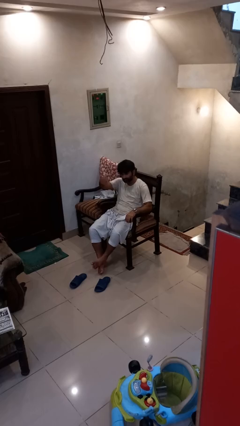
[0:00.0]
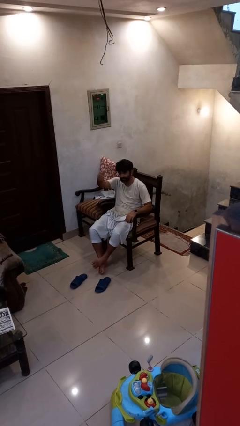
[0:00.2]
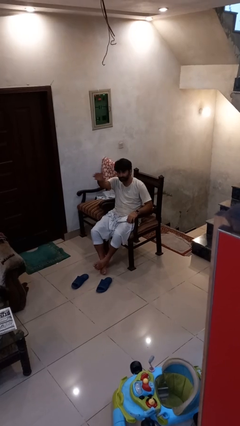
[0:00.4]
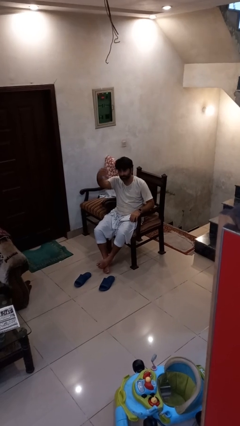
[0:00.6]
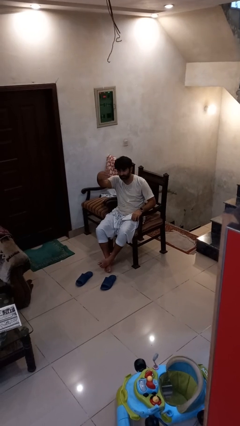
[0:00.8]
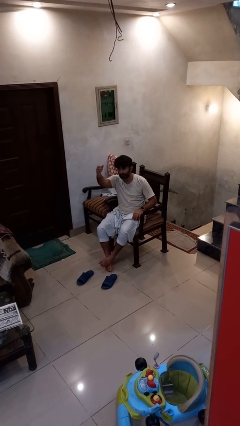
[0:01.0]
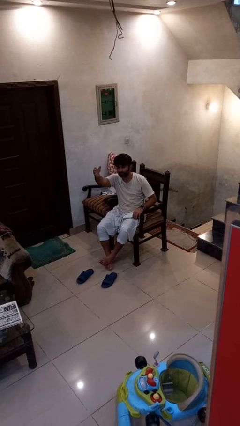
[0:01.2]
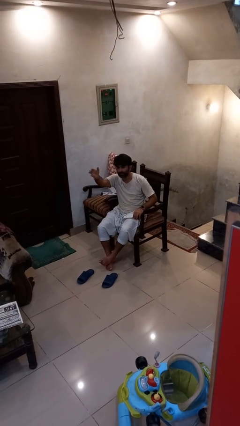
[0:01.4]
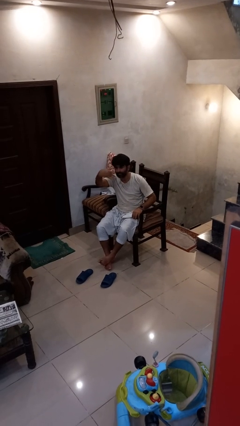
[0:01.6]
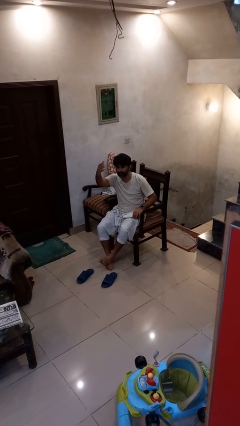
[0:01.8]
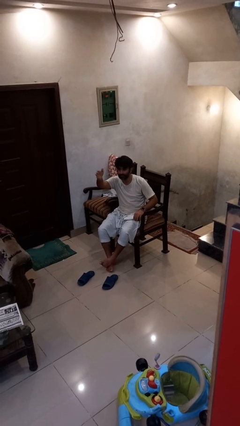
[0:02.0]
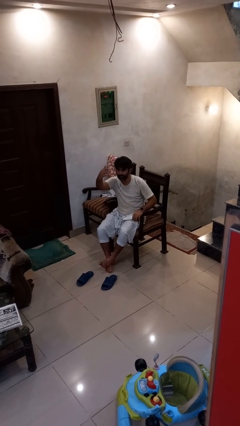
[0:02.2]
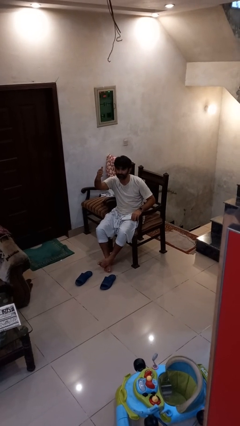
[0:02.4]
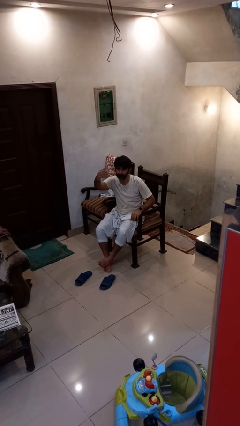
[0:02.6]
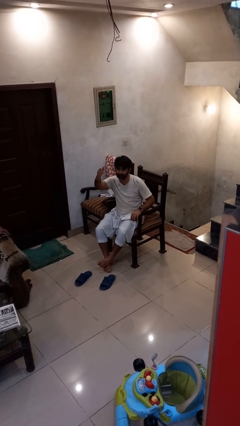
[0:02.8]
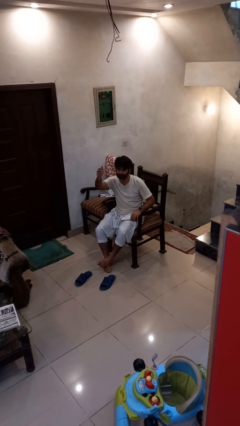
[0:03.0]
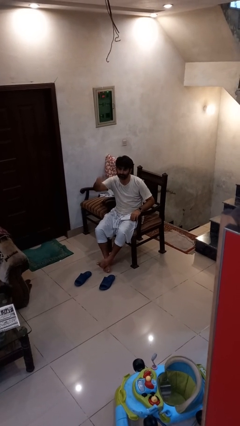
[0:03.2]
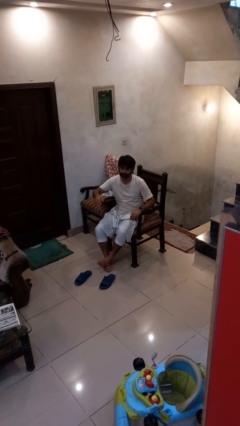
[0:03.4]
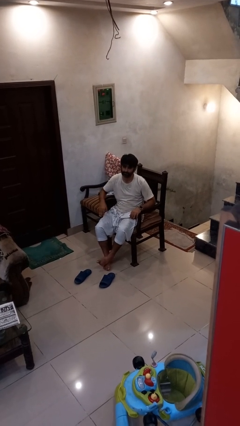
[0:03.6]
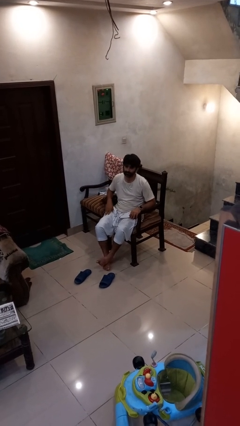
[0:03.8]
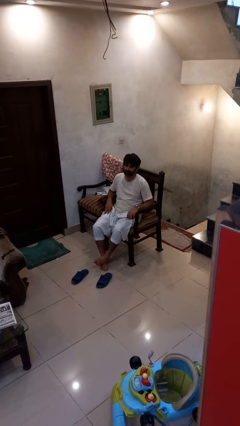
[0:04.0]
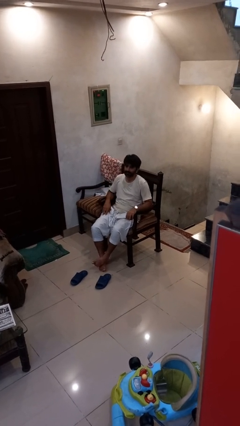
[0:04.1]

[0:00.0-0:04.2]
person gestures come here

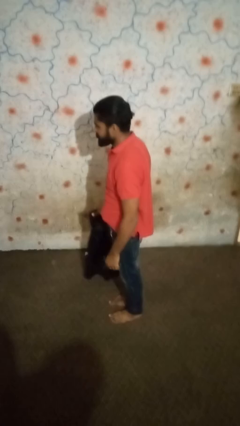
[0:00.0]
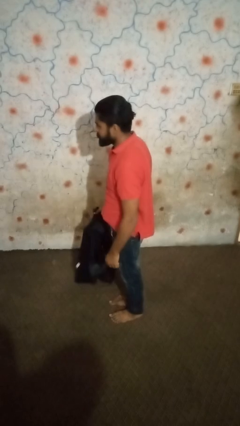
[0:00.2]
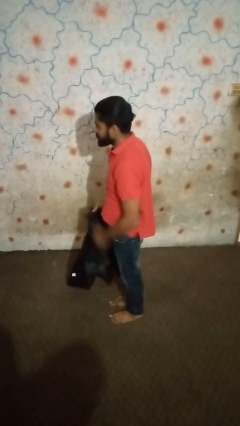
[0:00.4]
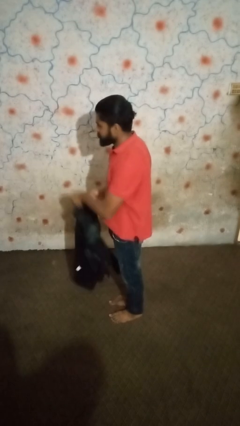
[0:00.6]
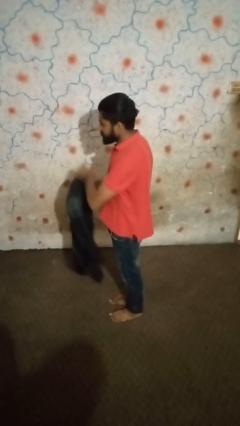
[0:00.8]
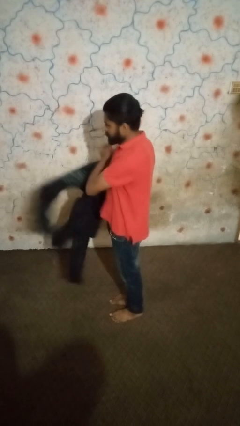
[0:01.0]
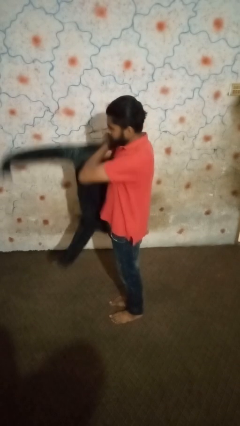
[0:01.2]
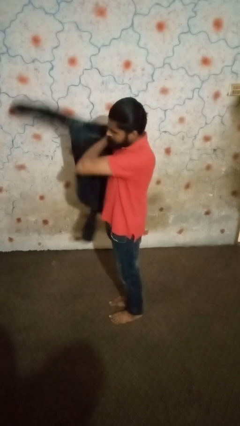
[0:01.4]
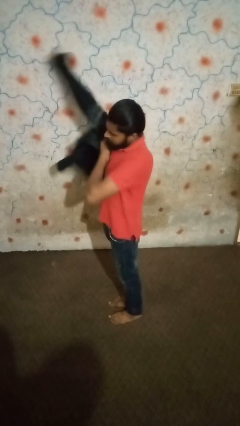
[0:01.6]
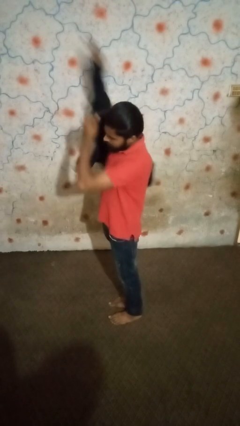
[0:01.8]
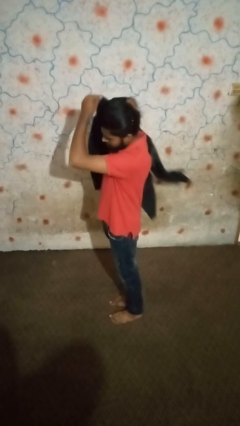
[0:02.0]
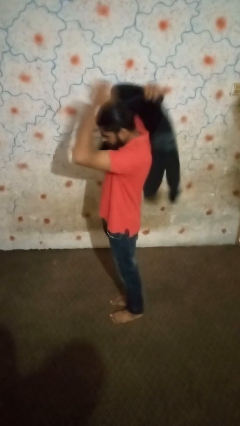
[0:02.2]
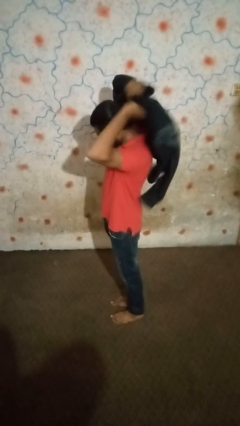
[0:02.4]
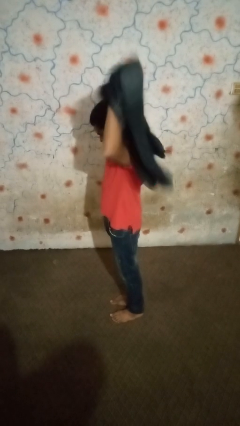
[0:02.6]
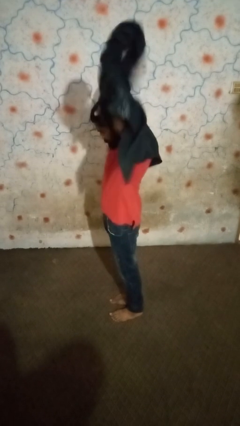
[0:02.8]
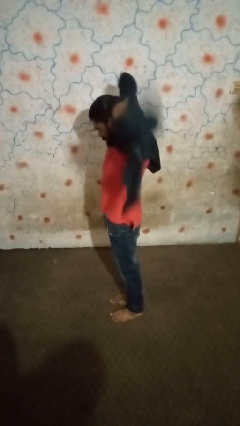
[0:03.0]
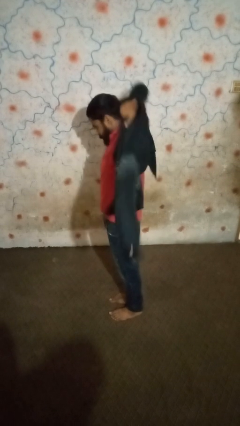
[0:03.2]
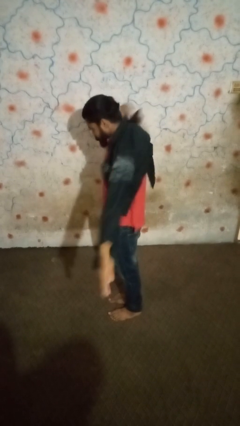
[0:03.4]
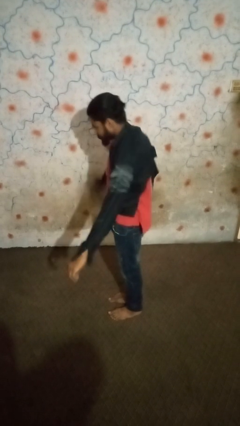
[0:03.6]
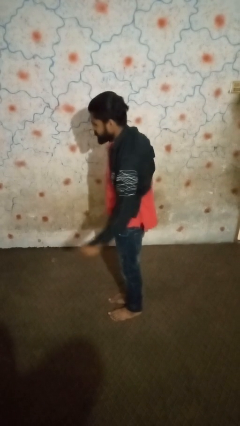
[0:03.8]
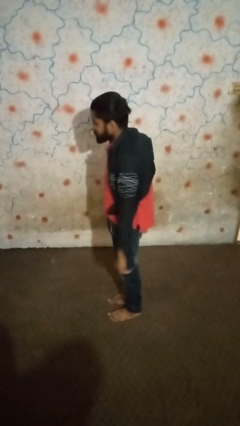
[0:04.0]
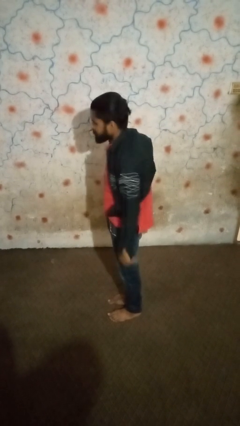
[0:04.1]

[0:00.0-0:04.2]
person puts on shirt

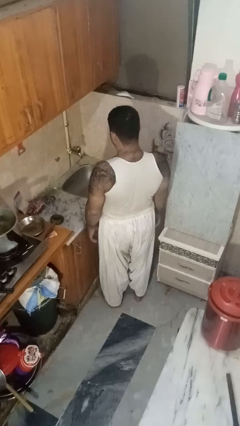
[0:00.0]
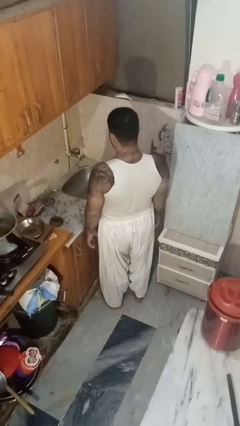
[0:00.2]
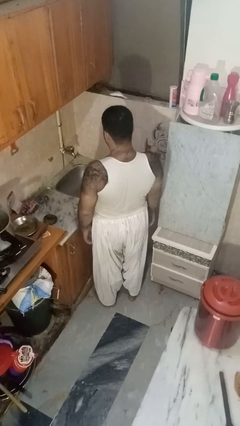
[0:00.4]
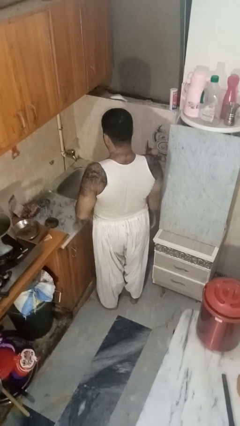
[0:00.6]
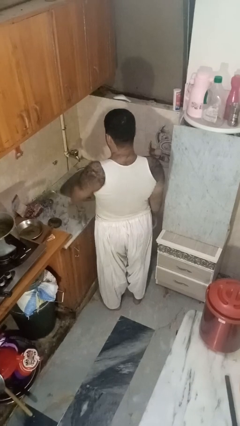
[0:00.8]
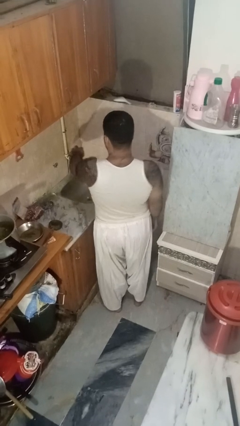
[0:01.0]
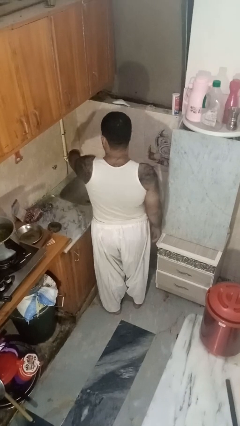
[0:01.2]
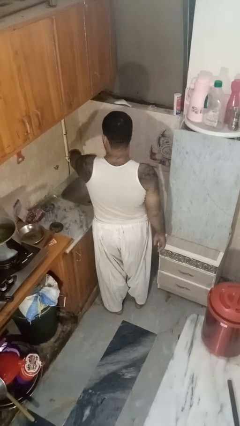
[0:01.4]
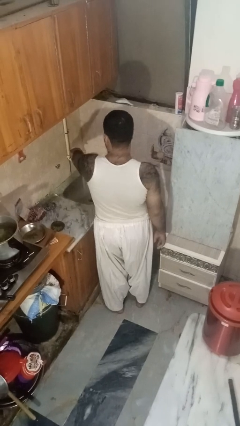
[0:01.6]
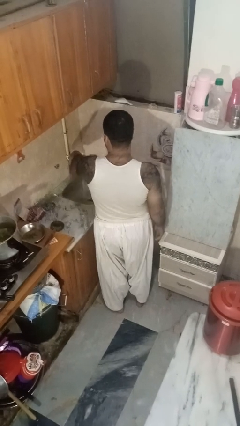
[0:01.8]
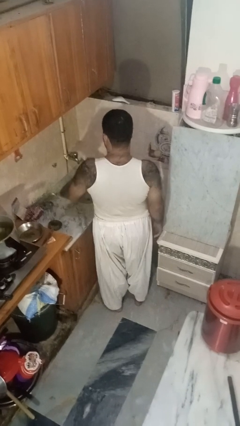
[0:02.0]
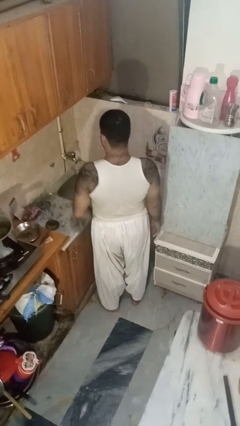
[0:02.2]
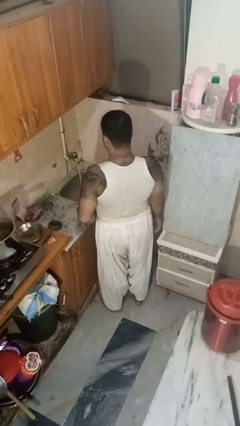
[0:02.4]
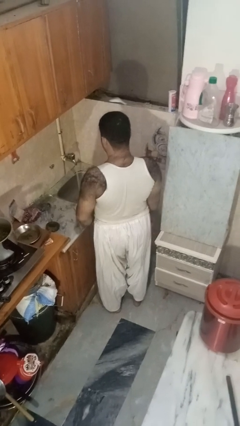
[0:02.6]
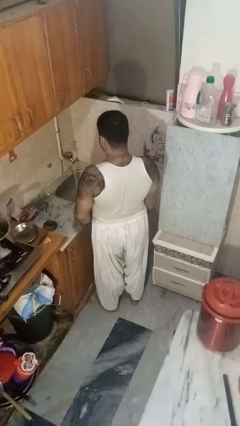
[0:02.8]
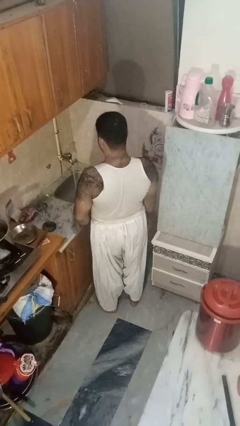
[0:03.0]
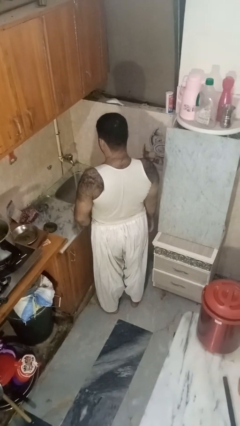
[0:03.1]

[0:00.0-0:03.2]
person turns on faucet

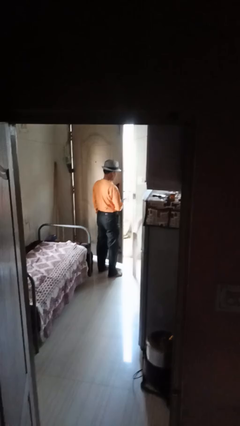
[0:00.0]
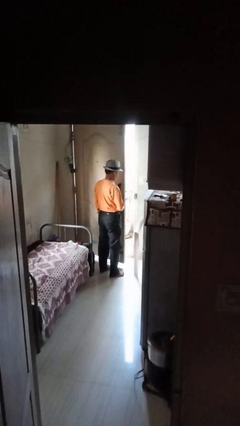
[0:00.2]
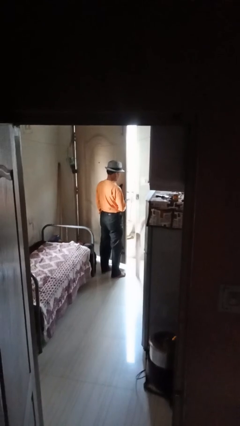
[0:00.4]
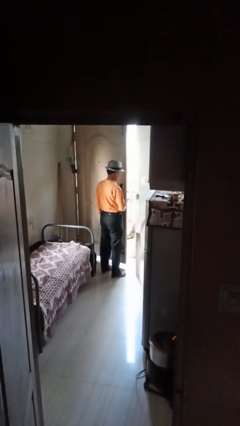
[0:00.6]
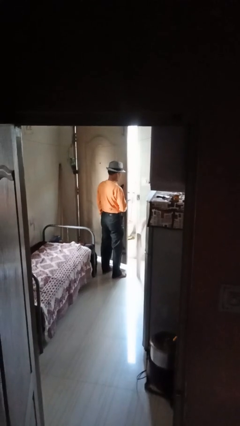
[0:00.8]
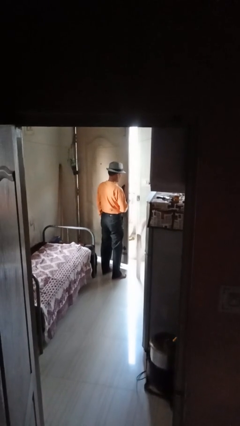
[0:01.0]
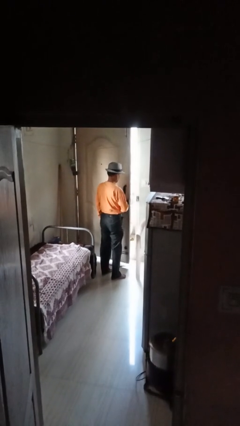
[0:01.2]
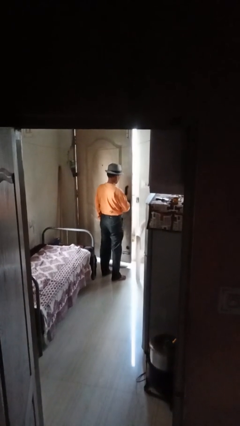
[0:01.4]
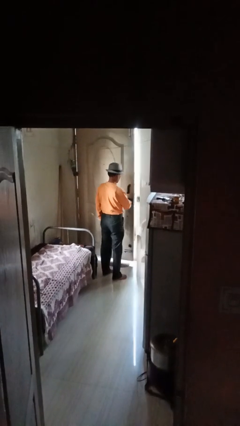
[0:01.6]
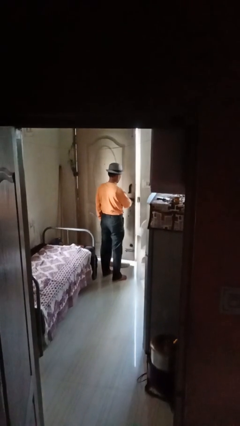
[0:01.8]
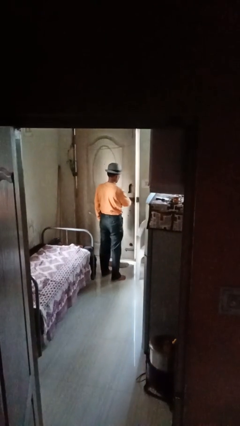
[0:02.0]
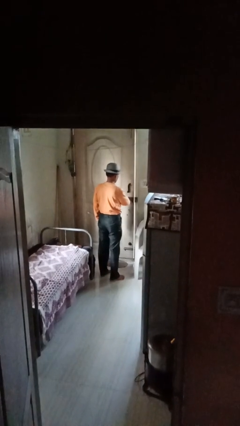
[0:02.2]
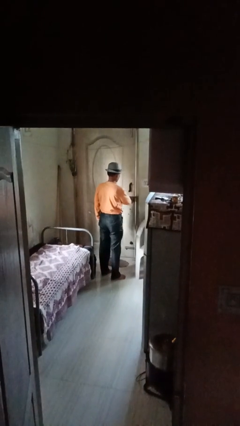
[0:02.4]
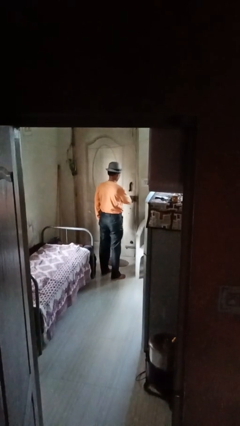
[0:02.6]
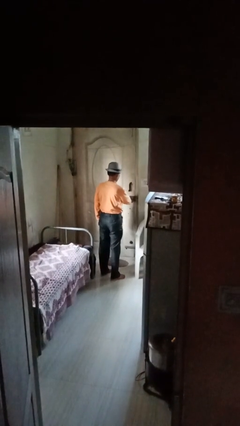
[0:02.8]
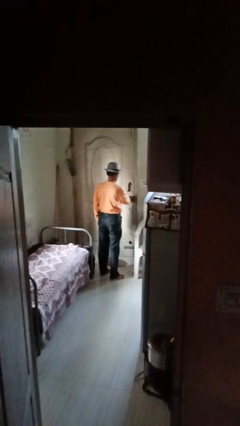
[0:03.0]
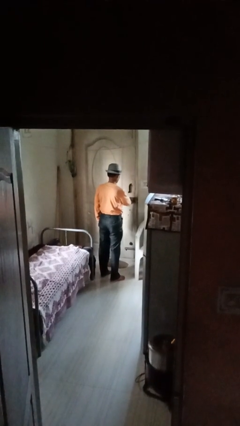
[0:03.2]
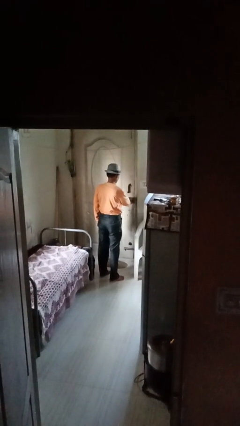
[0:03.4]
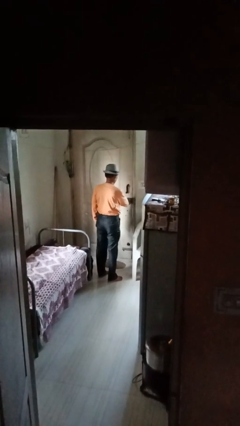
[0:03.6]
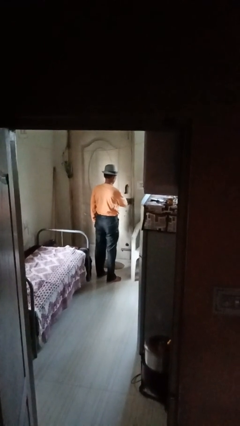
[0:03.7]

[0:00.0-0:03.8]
person closes facility door

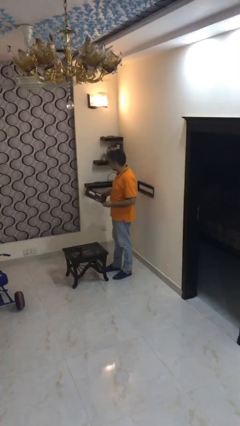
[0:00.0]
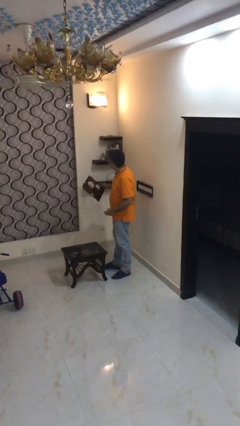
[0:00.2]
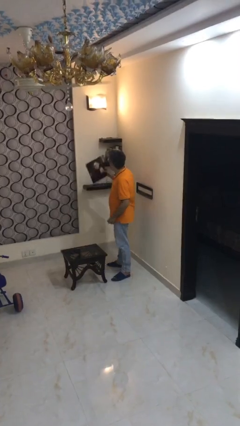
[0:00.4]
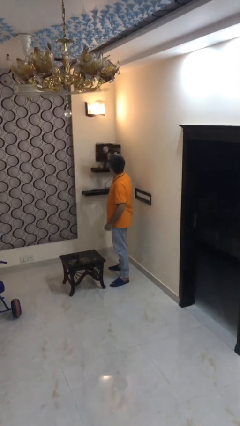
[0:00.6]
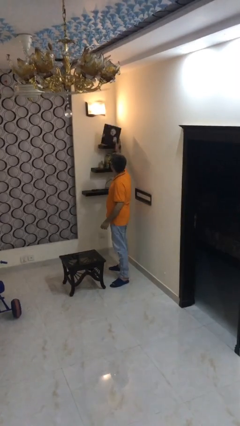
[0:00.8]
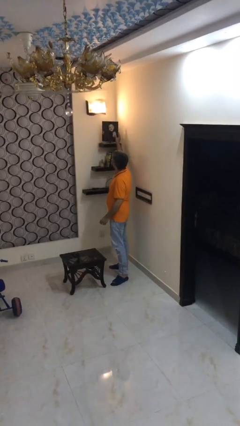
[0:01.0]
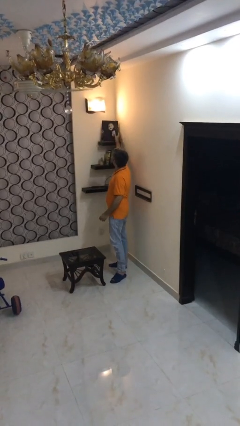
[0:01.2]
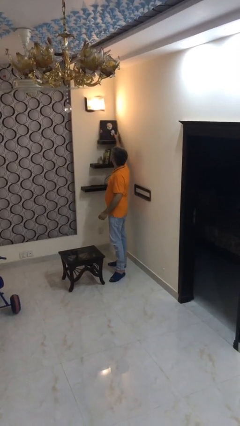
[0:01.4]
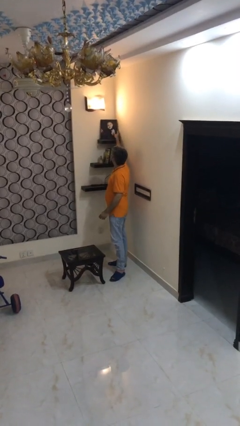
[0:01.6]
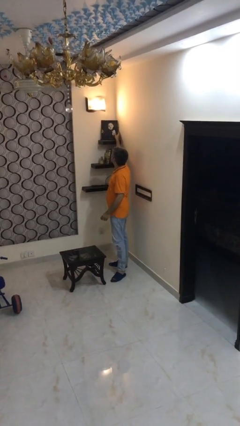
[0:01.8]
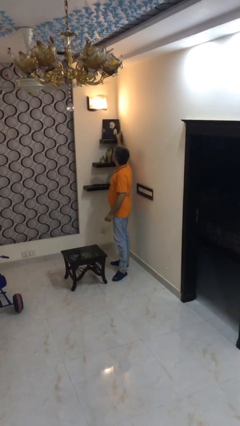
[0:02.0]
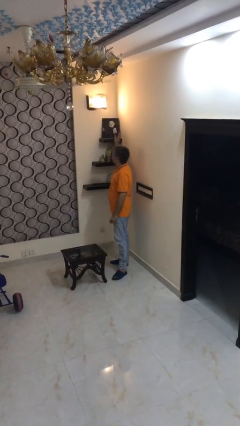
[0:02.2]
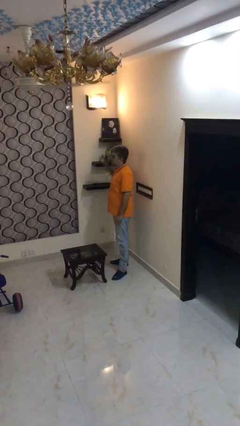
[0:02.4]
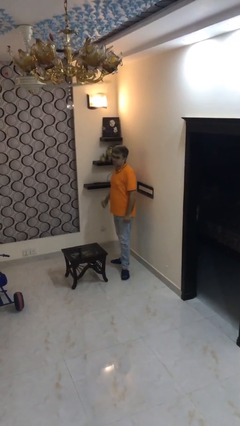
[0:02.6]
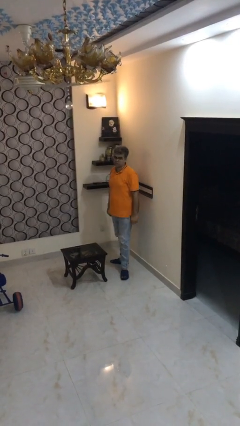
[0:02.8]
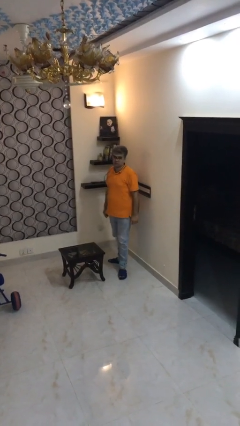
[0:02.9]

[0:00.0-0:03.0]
person puts down object on shelf
